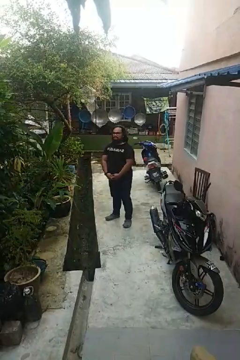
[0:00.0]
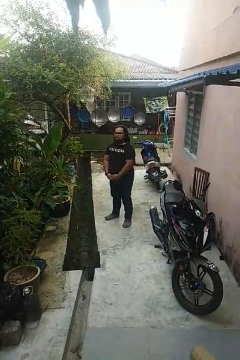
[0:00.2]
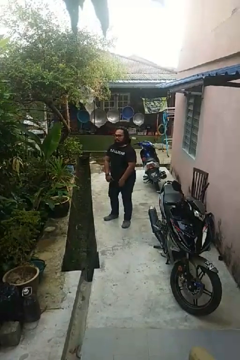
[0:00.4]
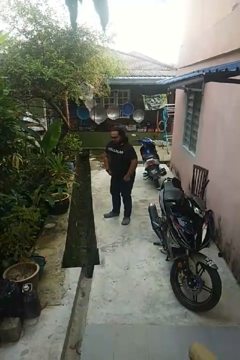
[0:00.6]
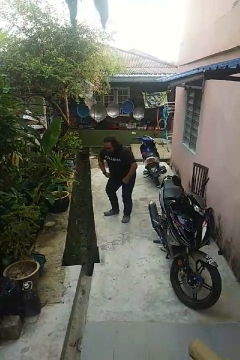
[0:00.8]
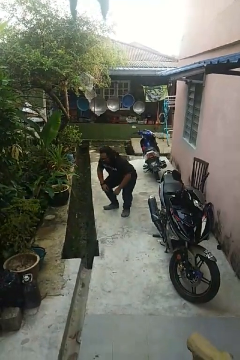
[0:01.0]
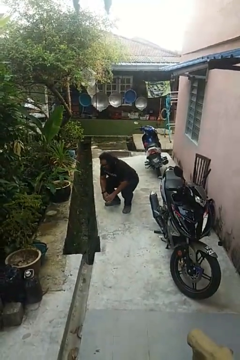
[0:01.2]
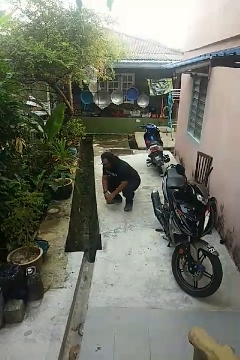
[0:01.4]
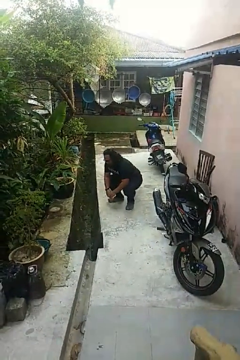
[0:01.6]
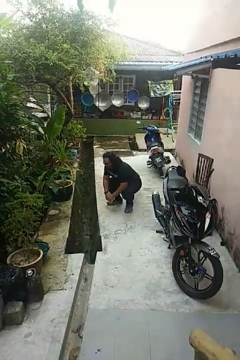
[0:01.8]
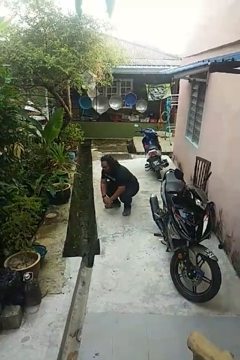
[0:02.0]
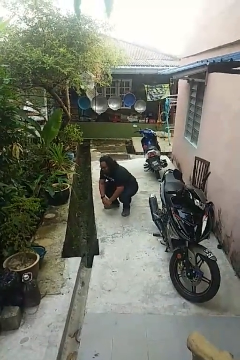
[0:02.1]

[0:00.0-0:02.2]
person squats

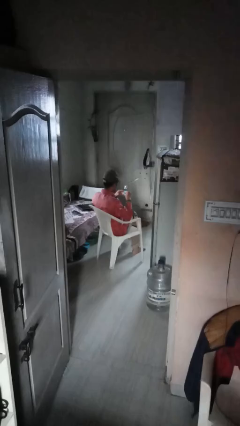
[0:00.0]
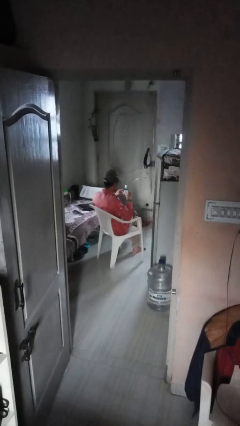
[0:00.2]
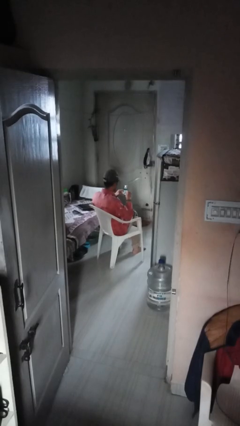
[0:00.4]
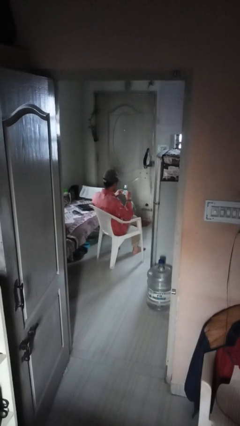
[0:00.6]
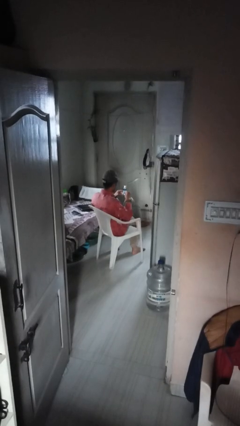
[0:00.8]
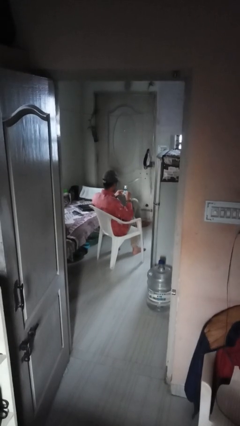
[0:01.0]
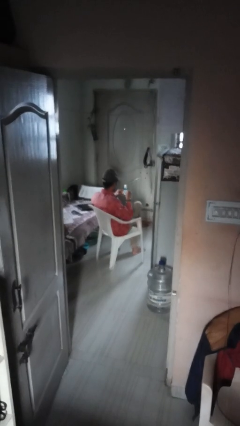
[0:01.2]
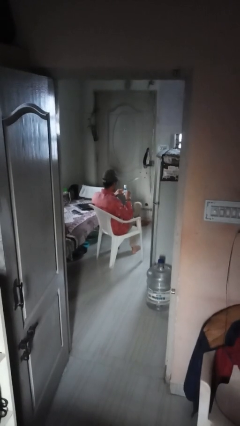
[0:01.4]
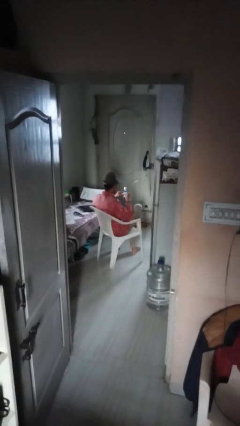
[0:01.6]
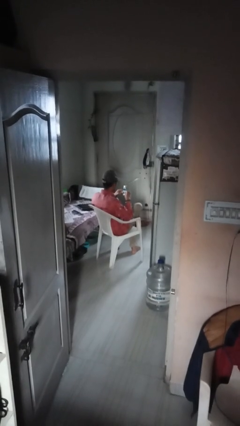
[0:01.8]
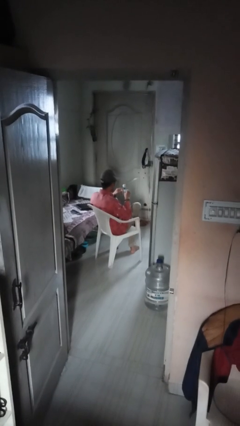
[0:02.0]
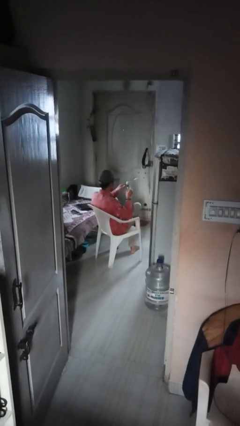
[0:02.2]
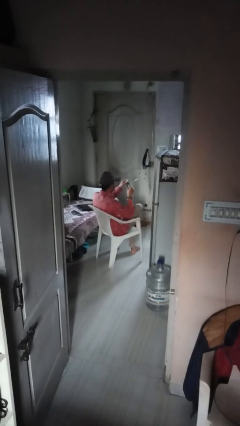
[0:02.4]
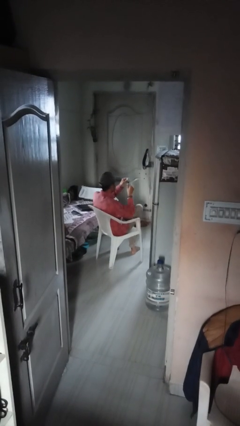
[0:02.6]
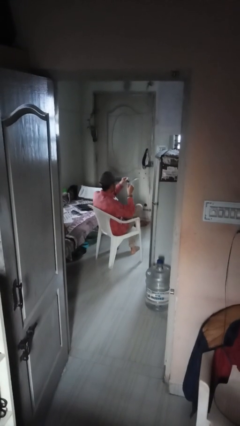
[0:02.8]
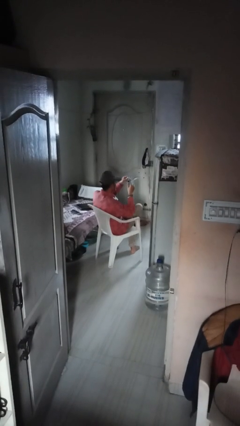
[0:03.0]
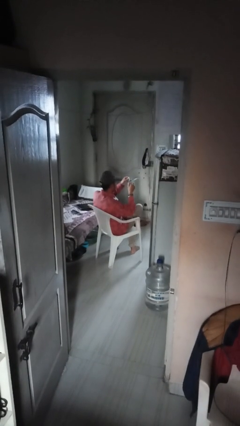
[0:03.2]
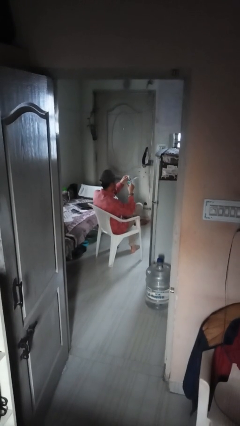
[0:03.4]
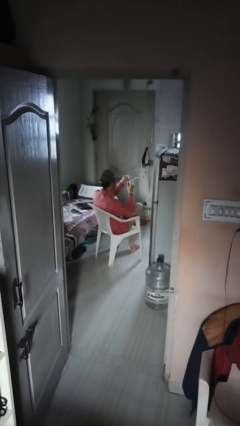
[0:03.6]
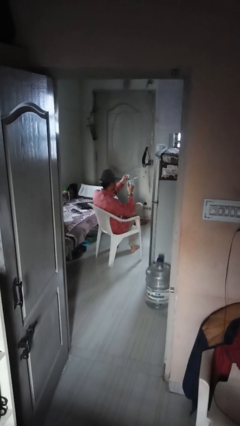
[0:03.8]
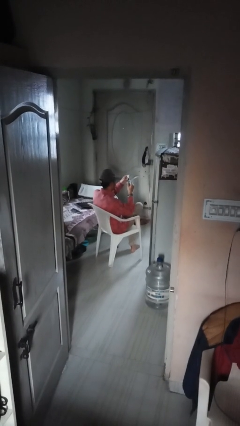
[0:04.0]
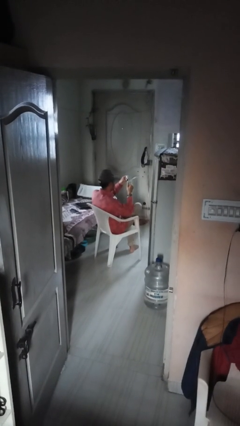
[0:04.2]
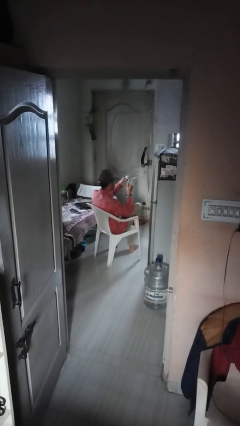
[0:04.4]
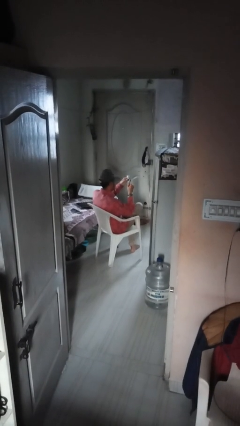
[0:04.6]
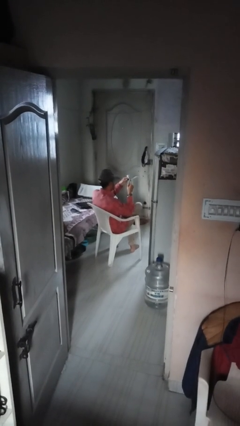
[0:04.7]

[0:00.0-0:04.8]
person squeezes object

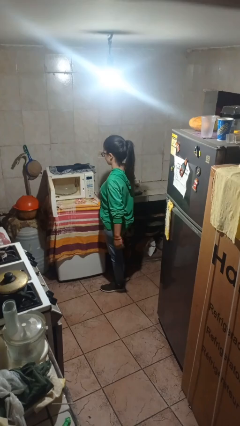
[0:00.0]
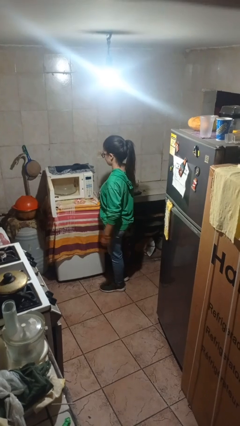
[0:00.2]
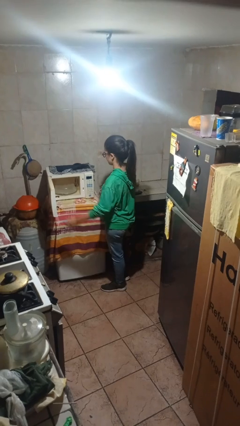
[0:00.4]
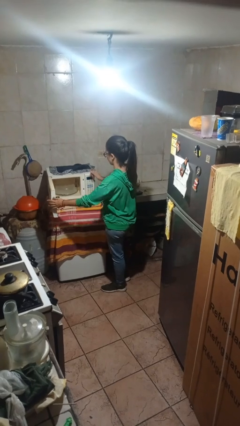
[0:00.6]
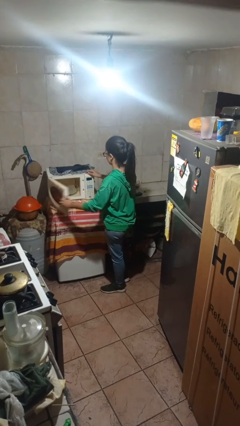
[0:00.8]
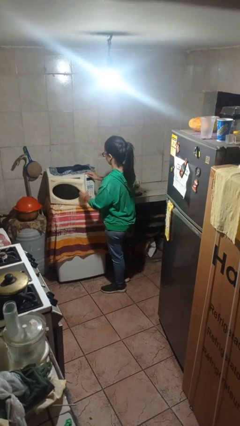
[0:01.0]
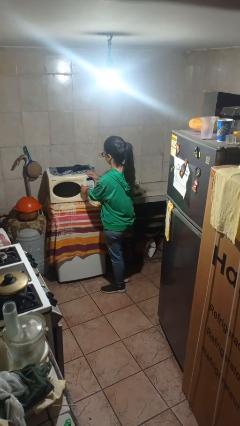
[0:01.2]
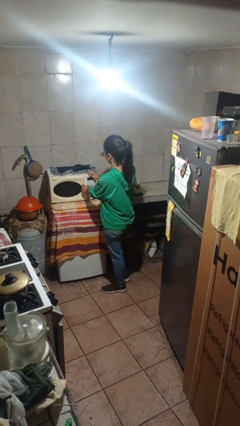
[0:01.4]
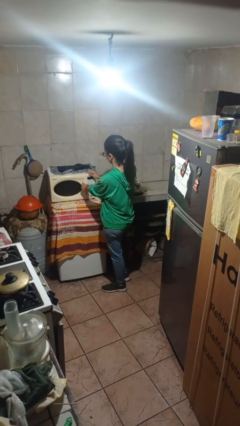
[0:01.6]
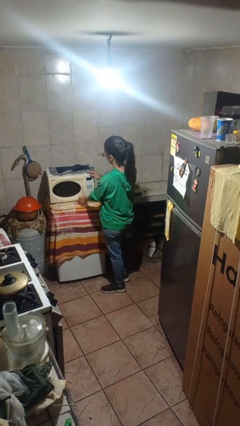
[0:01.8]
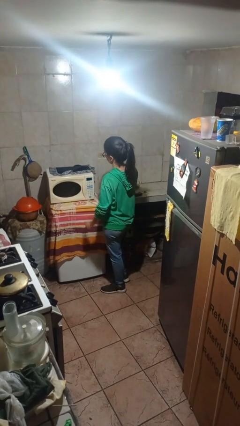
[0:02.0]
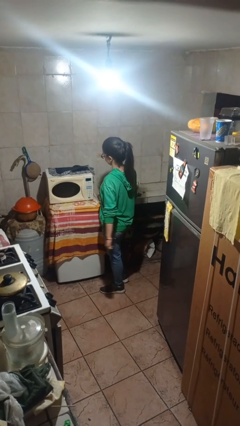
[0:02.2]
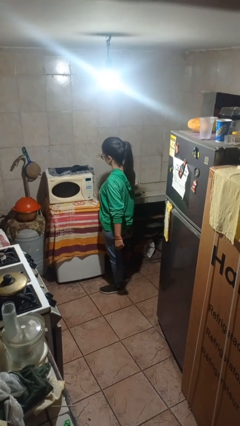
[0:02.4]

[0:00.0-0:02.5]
person closes microwave

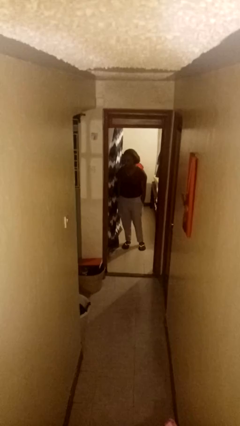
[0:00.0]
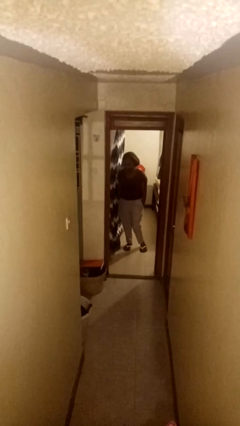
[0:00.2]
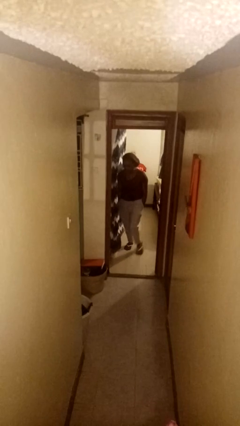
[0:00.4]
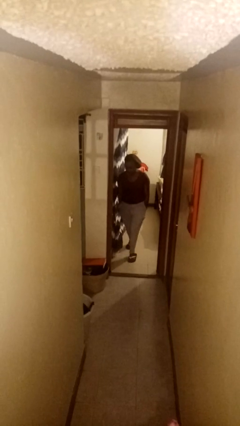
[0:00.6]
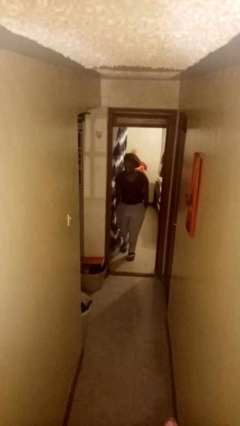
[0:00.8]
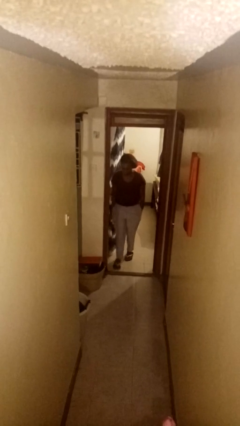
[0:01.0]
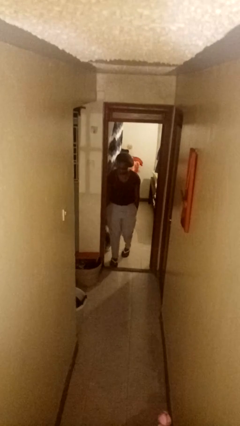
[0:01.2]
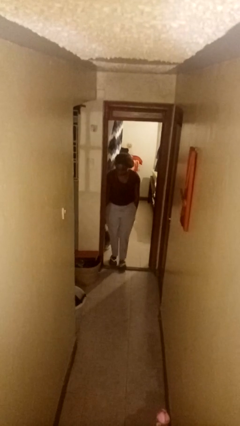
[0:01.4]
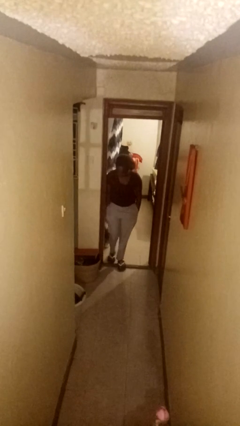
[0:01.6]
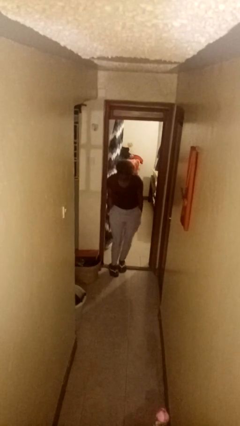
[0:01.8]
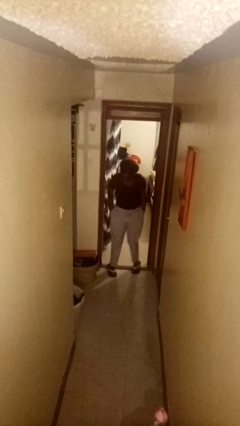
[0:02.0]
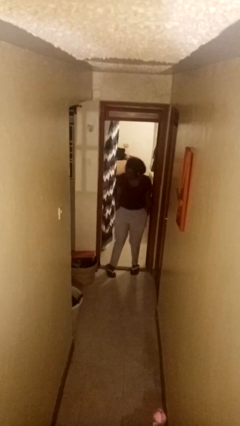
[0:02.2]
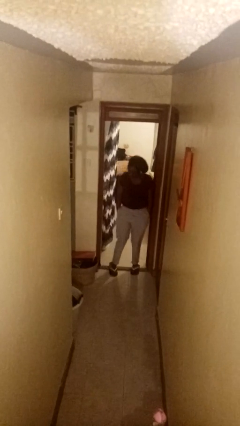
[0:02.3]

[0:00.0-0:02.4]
person bumps into wall

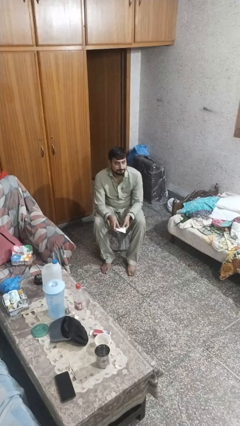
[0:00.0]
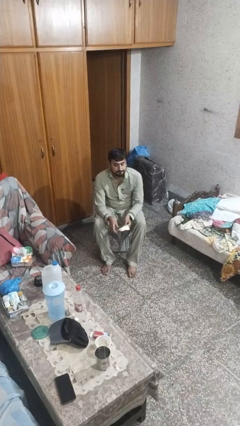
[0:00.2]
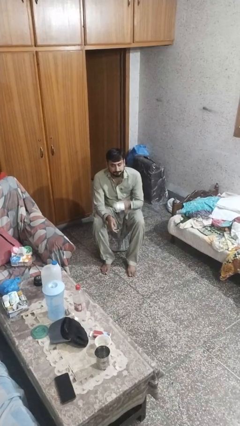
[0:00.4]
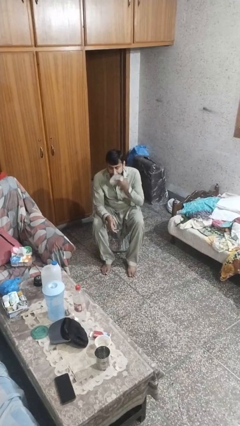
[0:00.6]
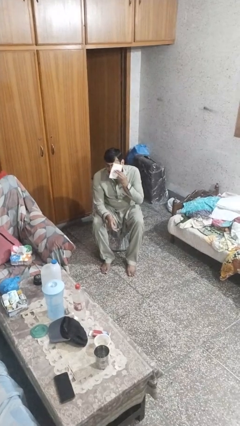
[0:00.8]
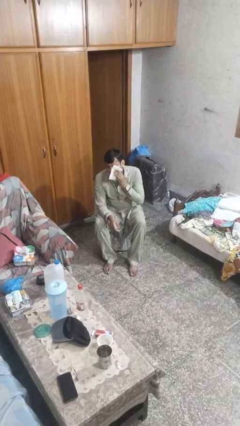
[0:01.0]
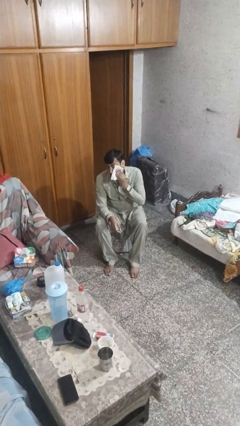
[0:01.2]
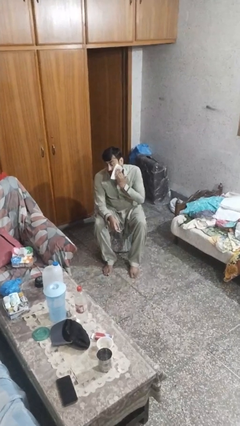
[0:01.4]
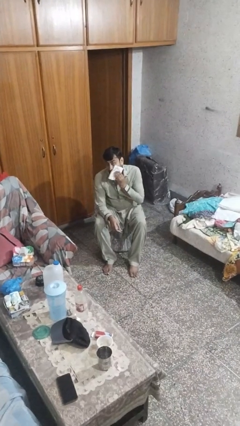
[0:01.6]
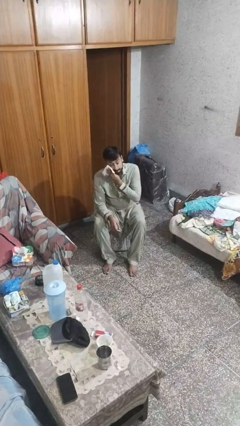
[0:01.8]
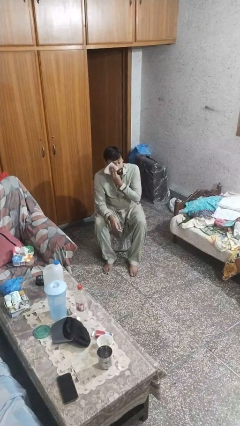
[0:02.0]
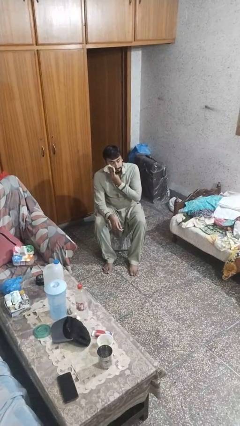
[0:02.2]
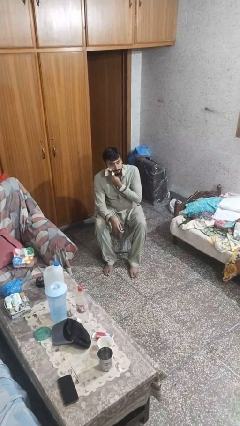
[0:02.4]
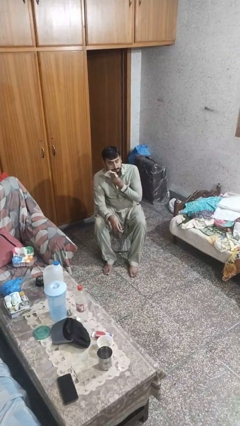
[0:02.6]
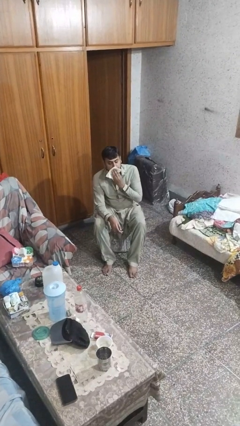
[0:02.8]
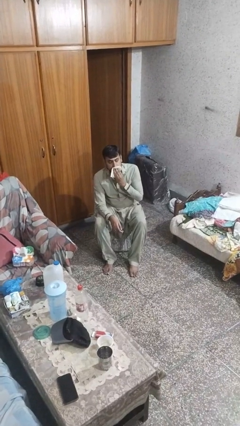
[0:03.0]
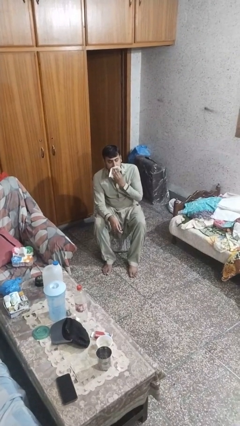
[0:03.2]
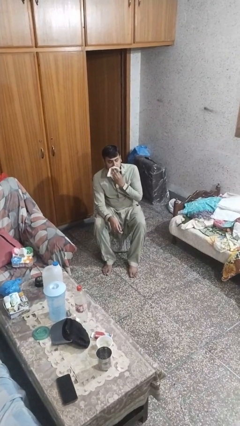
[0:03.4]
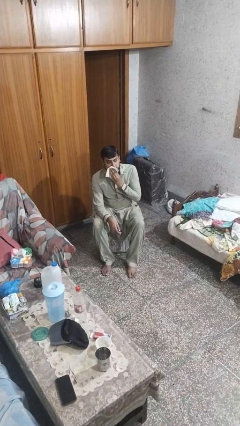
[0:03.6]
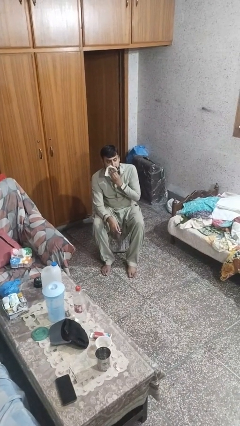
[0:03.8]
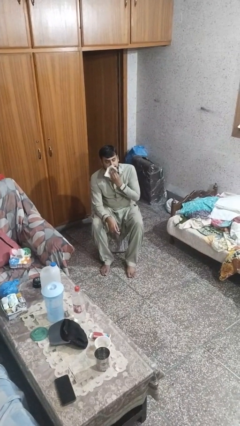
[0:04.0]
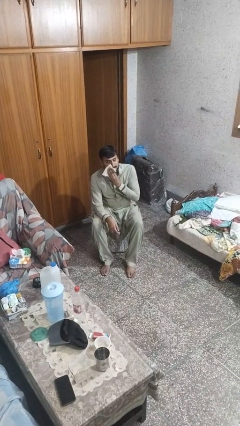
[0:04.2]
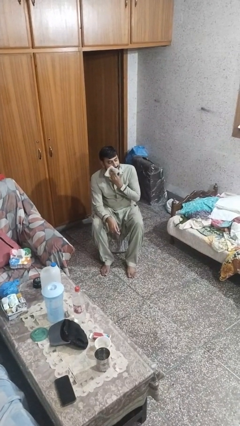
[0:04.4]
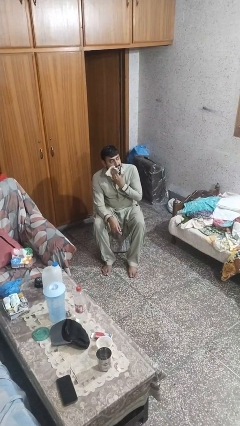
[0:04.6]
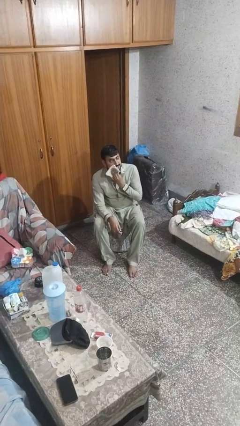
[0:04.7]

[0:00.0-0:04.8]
person wipes mouth with napkin

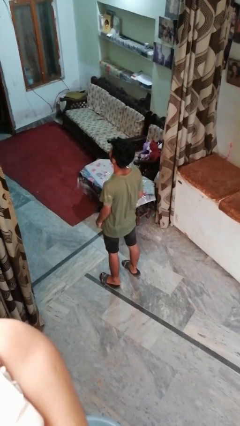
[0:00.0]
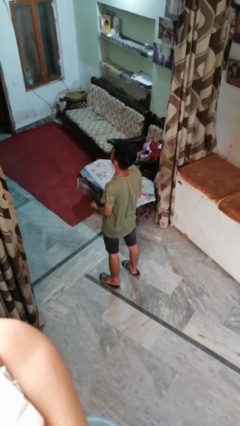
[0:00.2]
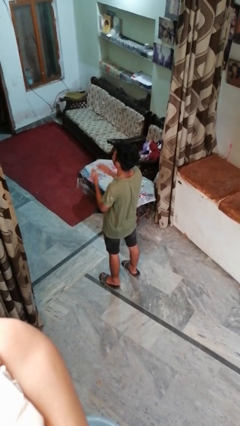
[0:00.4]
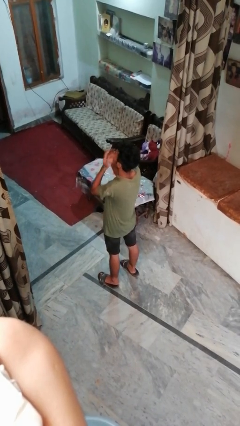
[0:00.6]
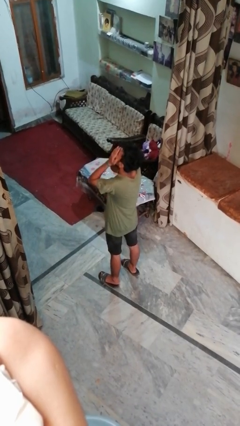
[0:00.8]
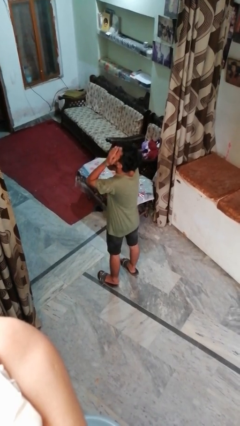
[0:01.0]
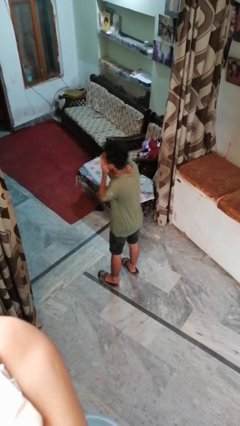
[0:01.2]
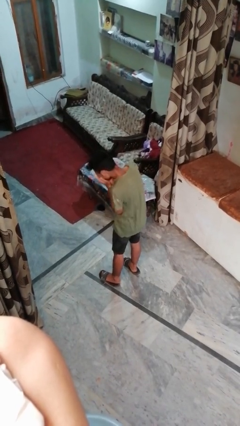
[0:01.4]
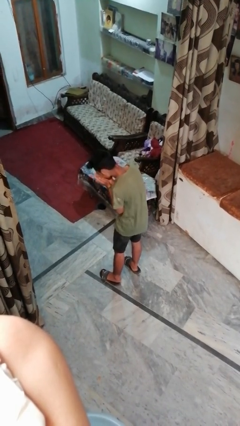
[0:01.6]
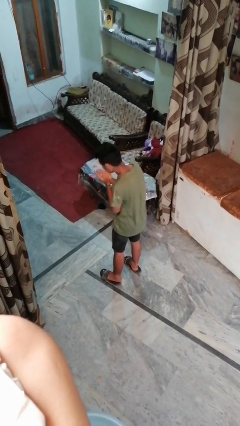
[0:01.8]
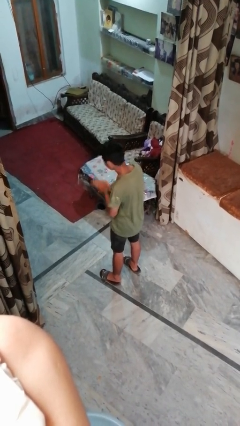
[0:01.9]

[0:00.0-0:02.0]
person sneezes into hand
